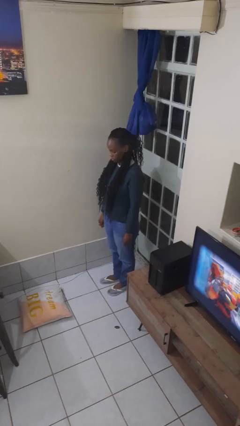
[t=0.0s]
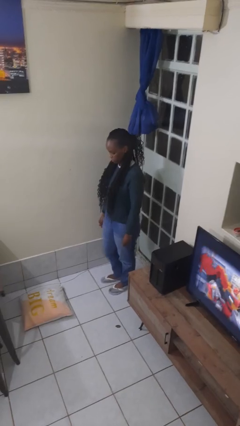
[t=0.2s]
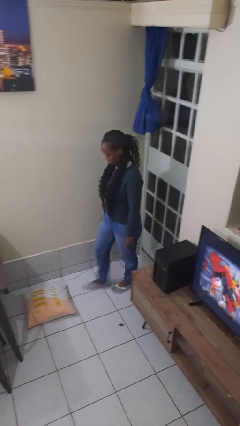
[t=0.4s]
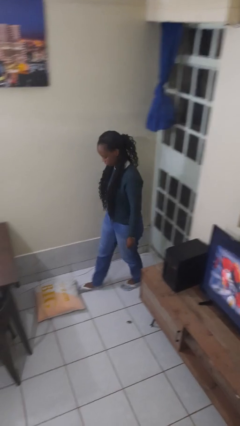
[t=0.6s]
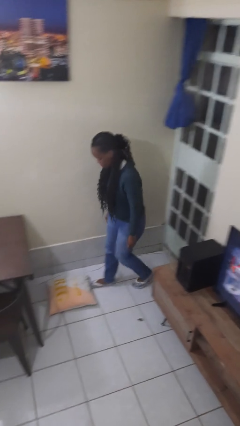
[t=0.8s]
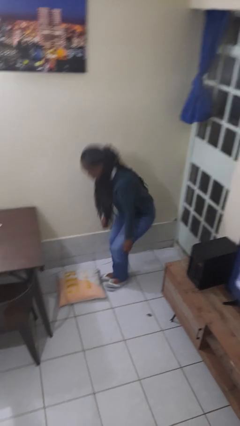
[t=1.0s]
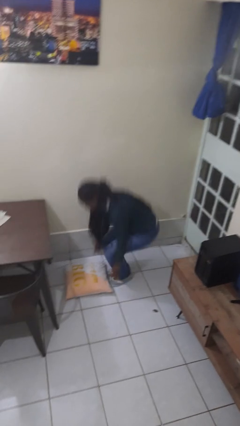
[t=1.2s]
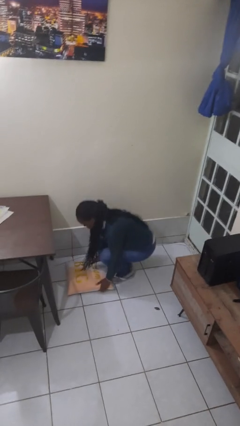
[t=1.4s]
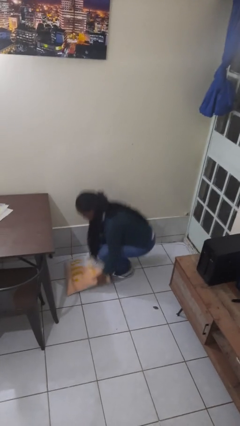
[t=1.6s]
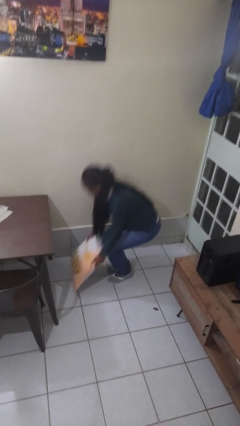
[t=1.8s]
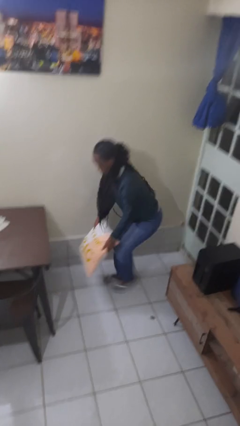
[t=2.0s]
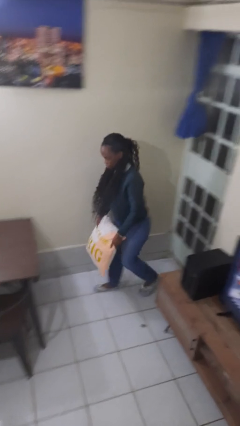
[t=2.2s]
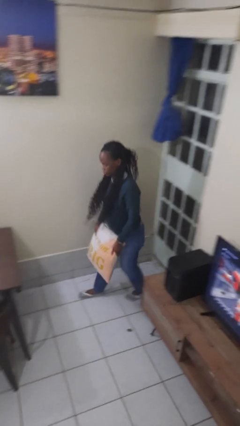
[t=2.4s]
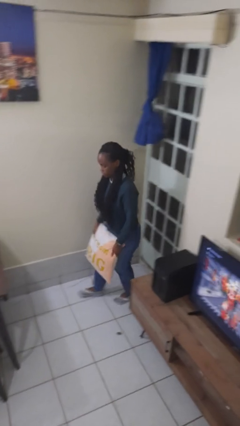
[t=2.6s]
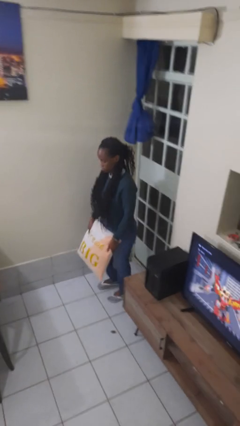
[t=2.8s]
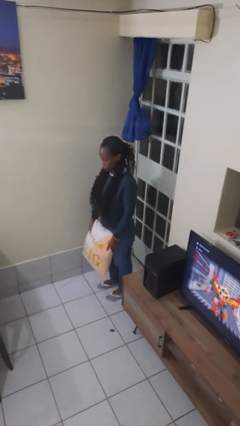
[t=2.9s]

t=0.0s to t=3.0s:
person picks up object from floor

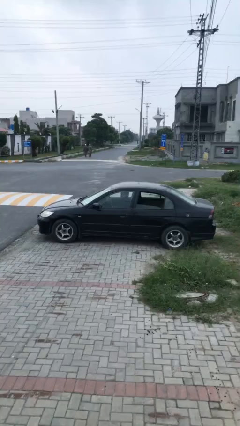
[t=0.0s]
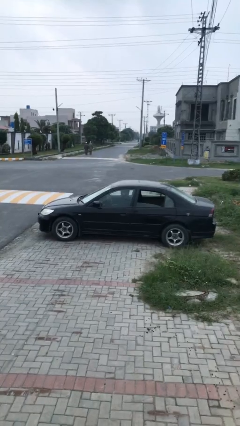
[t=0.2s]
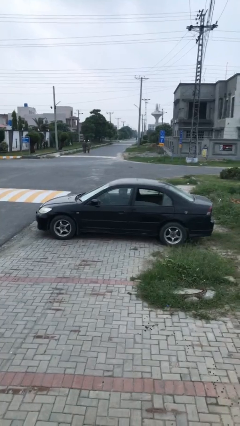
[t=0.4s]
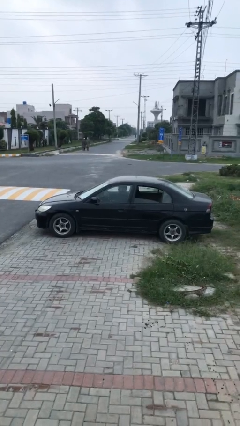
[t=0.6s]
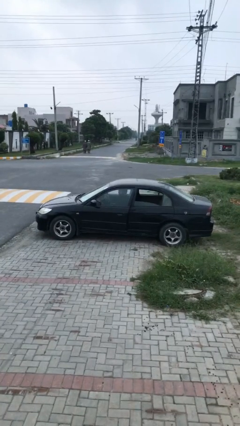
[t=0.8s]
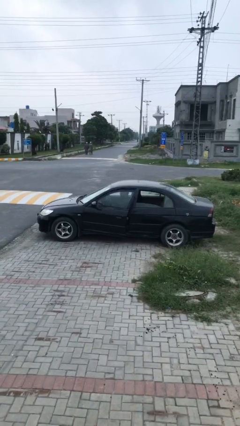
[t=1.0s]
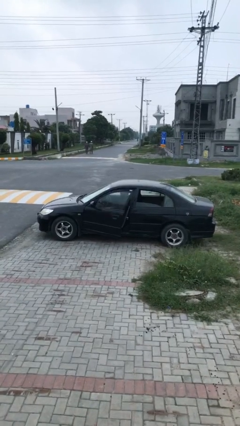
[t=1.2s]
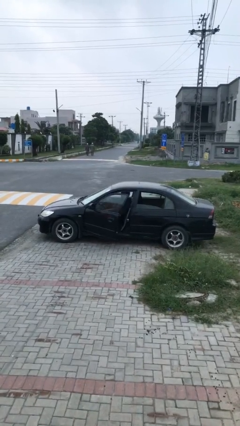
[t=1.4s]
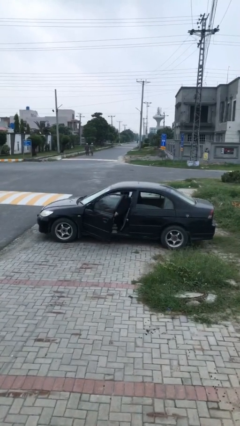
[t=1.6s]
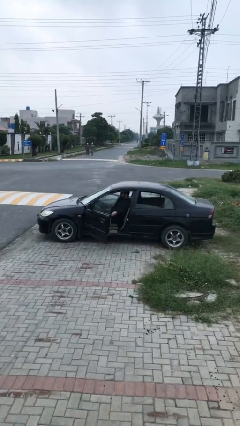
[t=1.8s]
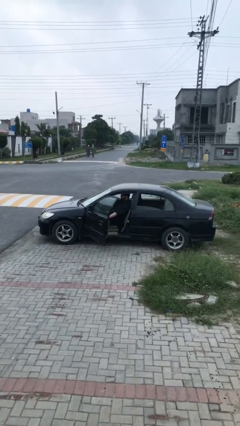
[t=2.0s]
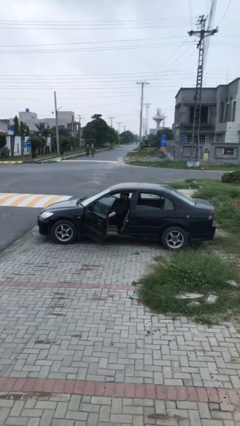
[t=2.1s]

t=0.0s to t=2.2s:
person opens car door

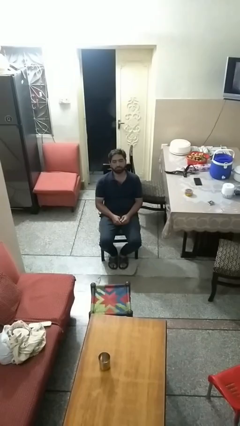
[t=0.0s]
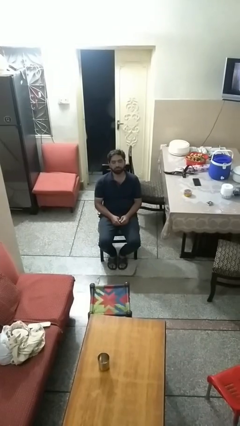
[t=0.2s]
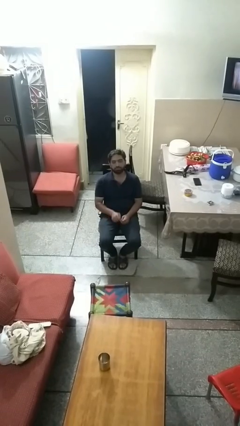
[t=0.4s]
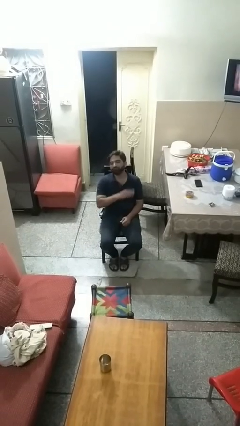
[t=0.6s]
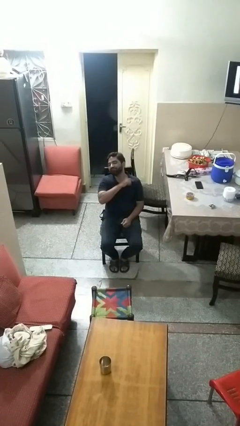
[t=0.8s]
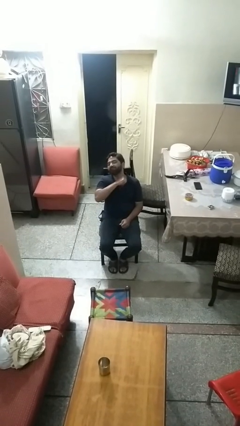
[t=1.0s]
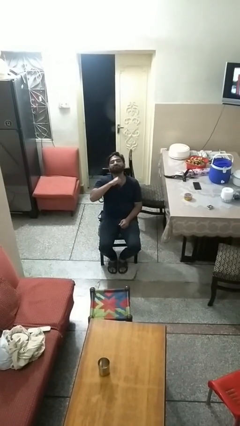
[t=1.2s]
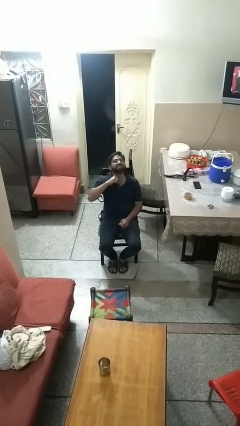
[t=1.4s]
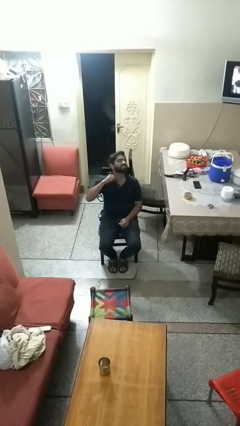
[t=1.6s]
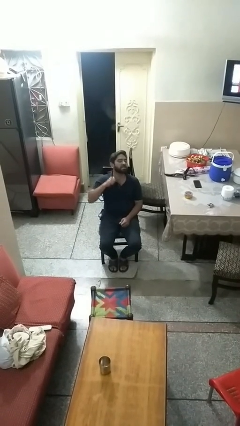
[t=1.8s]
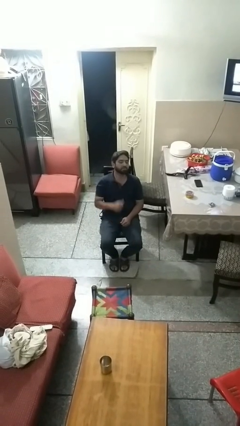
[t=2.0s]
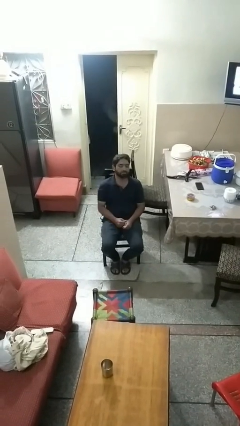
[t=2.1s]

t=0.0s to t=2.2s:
person gestures cut

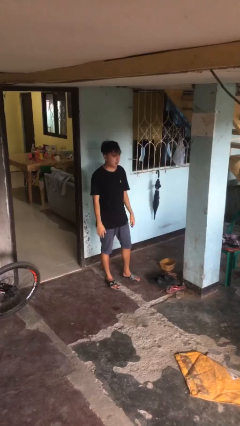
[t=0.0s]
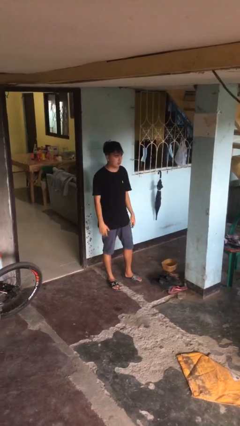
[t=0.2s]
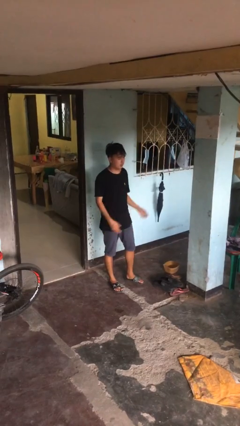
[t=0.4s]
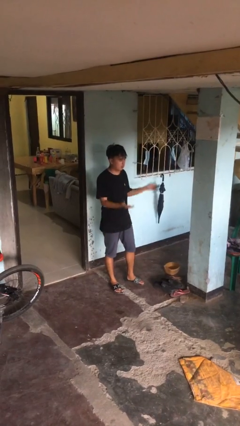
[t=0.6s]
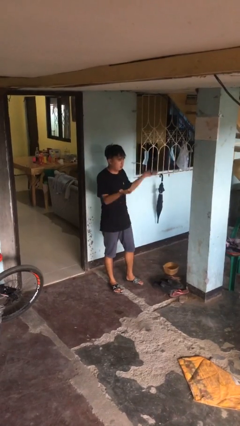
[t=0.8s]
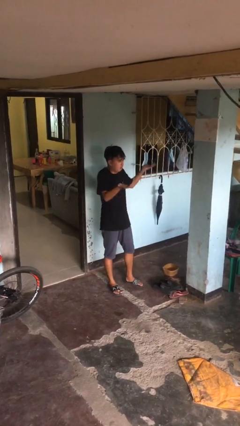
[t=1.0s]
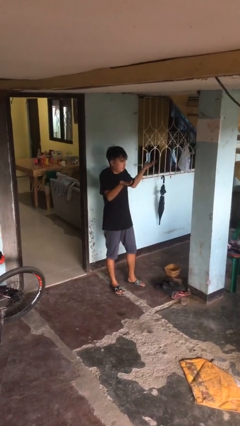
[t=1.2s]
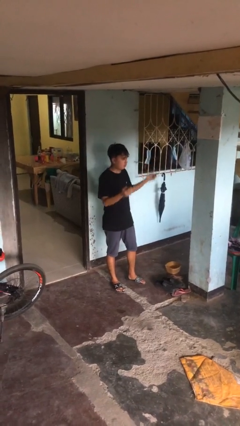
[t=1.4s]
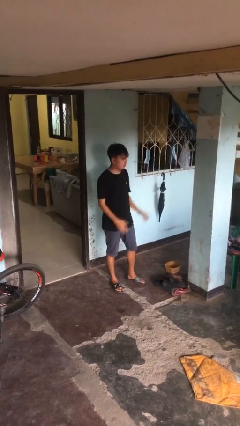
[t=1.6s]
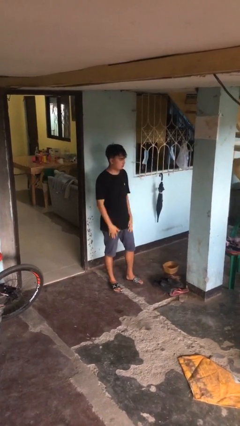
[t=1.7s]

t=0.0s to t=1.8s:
person shrugs

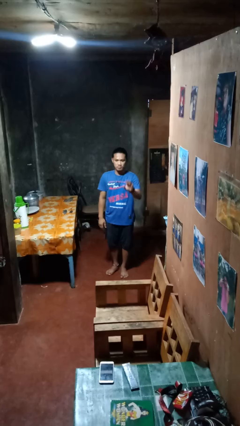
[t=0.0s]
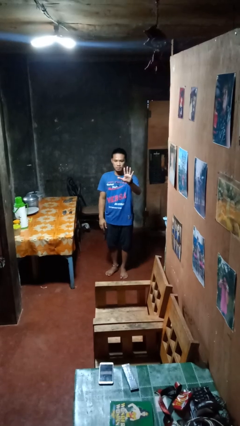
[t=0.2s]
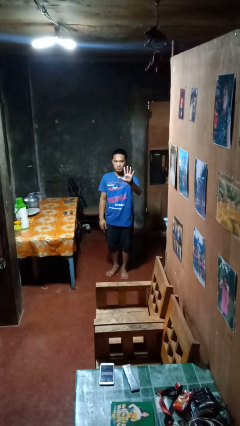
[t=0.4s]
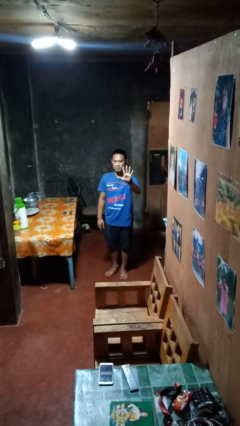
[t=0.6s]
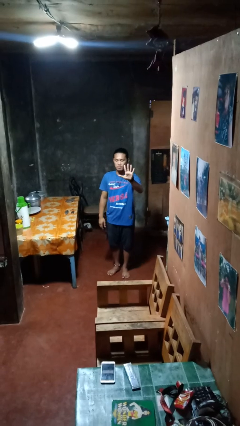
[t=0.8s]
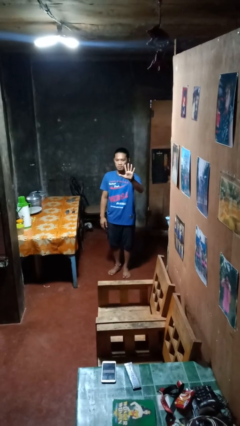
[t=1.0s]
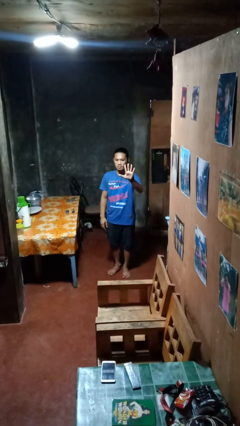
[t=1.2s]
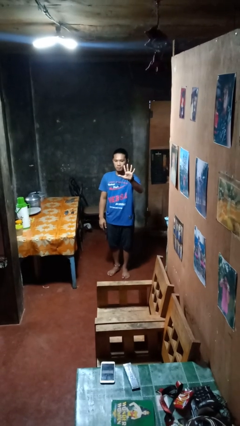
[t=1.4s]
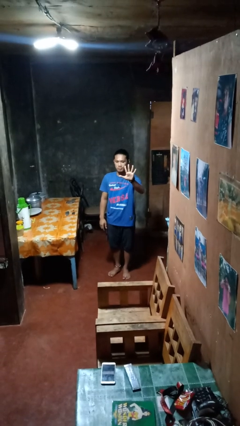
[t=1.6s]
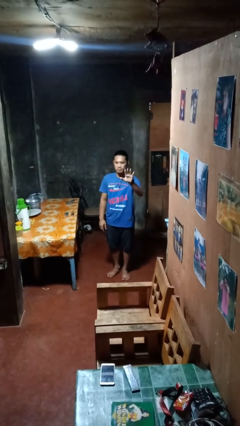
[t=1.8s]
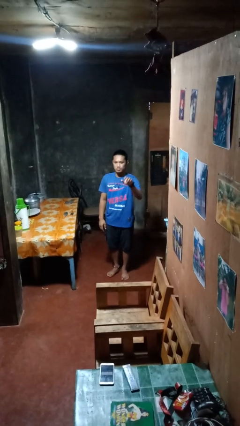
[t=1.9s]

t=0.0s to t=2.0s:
person gestures number five

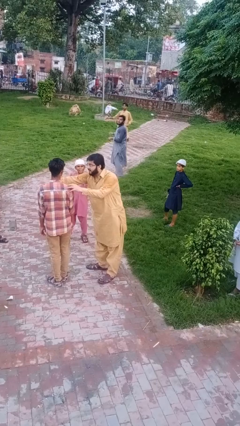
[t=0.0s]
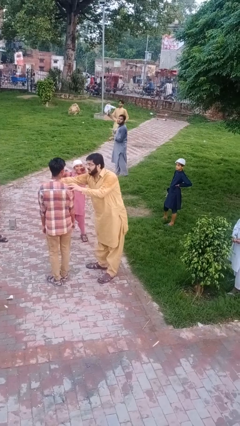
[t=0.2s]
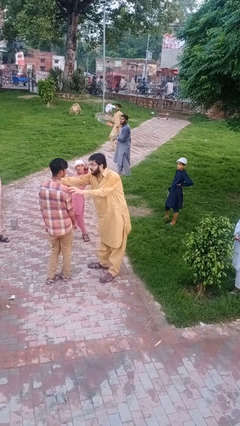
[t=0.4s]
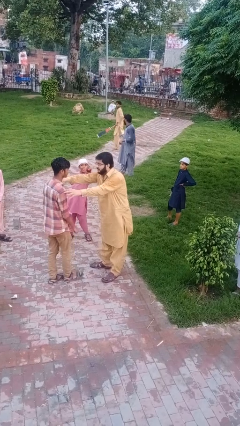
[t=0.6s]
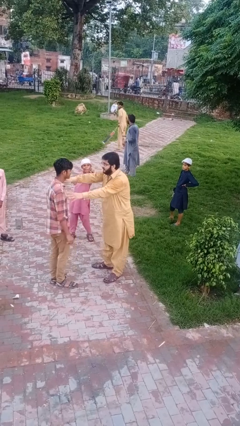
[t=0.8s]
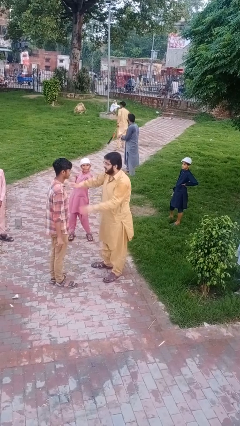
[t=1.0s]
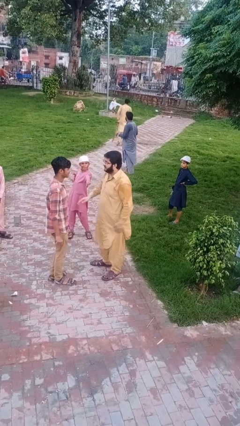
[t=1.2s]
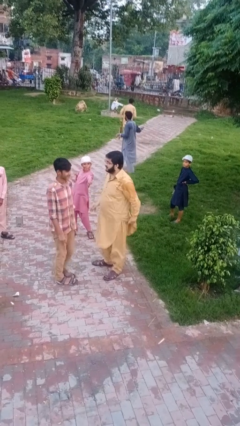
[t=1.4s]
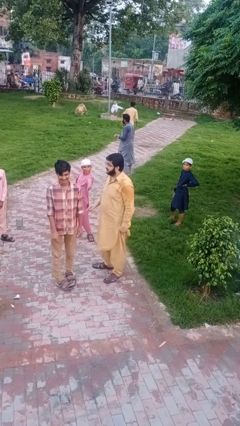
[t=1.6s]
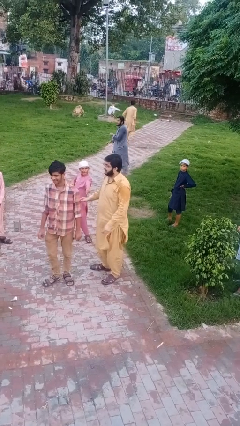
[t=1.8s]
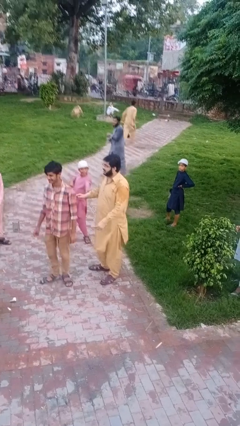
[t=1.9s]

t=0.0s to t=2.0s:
person spins person around

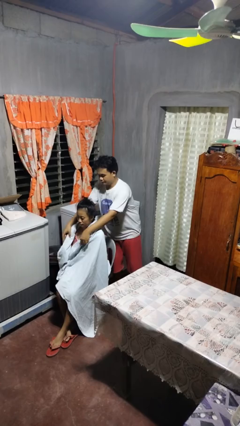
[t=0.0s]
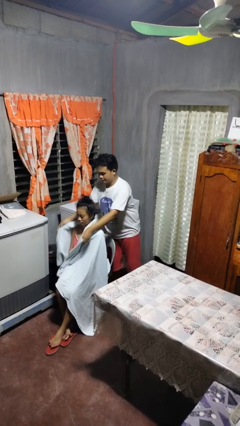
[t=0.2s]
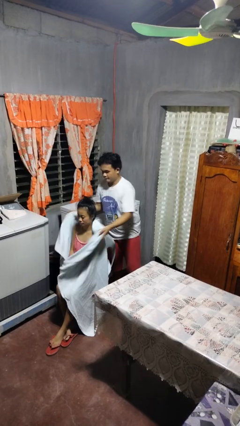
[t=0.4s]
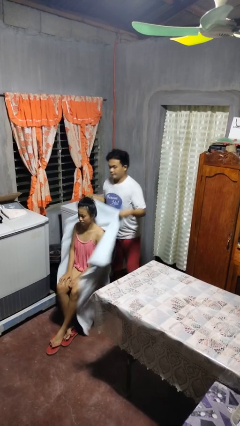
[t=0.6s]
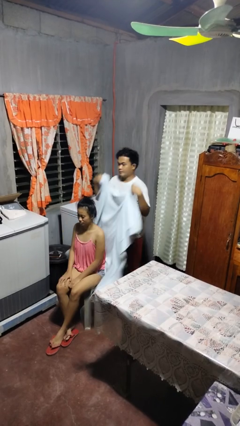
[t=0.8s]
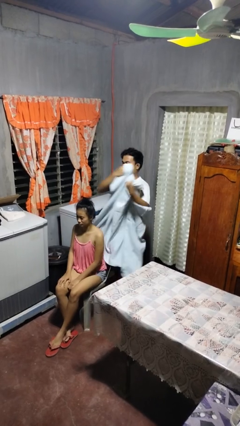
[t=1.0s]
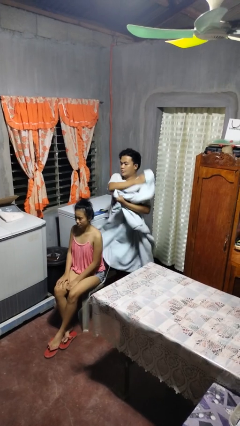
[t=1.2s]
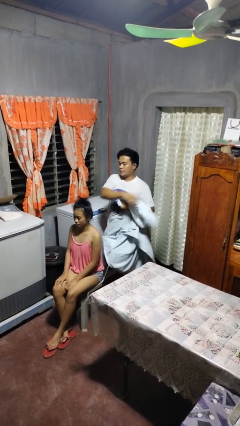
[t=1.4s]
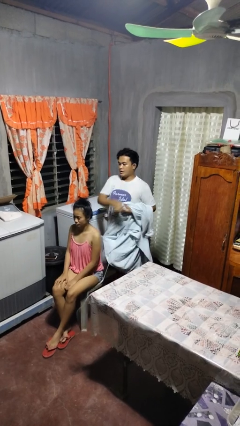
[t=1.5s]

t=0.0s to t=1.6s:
person uncovers friend with blanket

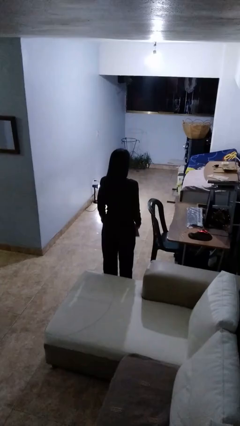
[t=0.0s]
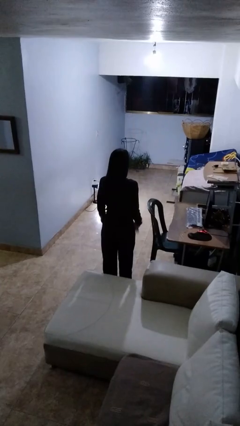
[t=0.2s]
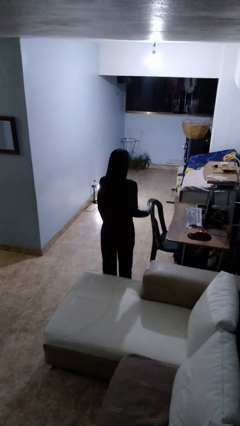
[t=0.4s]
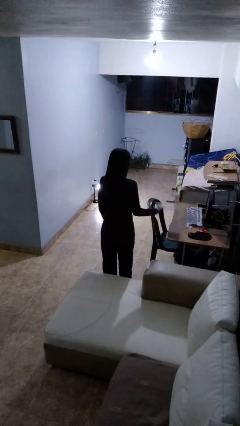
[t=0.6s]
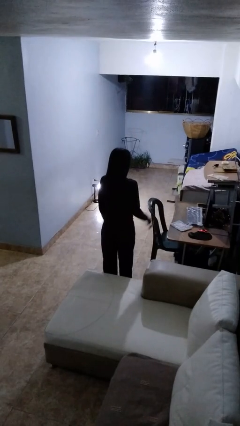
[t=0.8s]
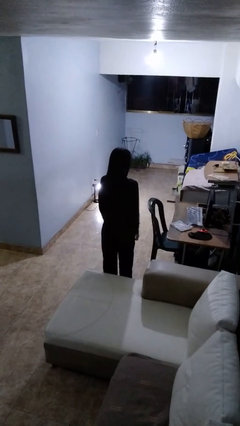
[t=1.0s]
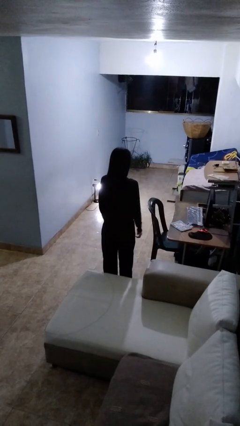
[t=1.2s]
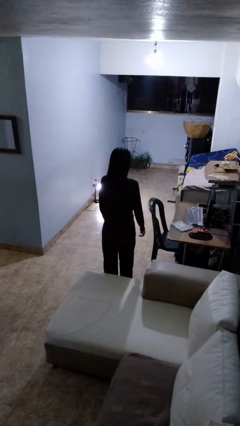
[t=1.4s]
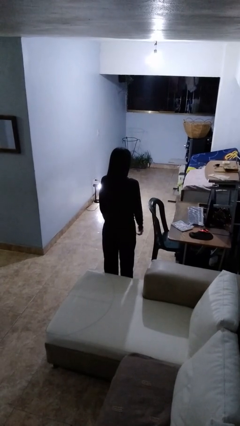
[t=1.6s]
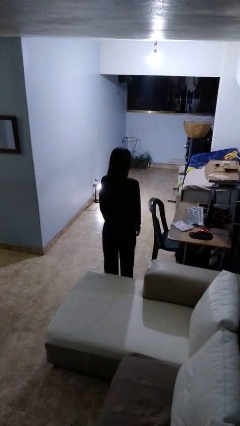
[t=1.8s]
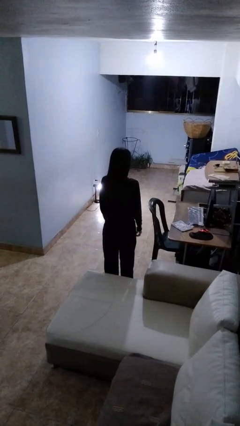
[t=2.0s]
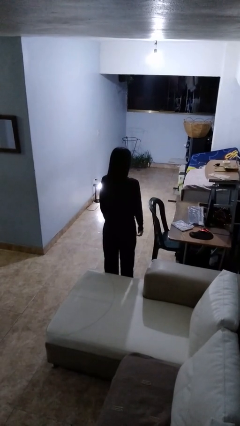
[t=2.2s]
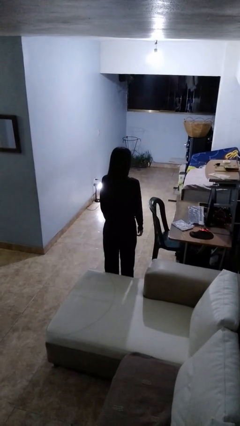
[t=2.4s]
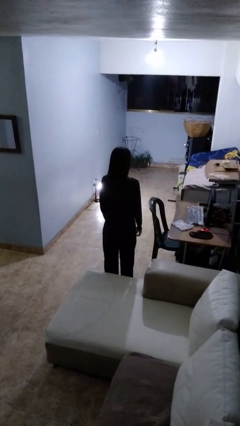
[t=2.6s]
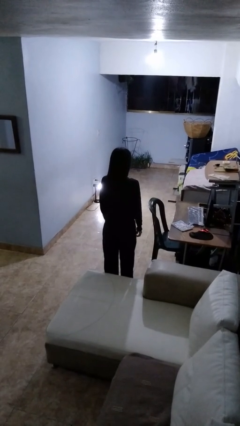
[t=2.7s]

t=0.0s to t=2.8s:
person throws object on table
